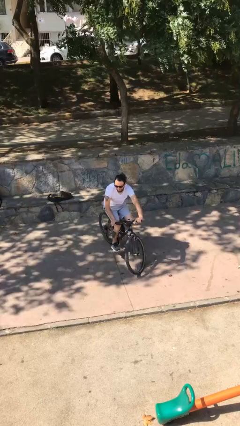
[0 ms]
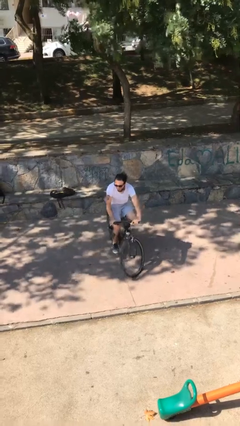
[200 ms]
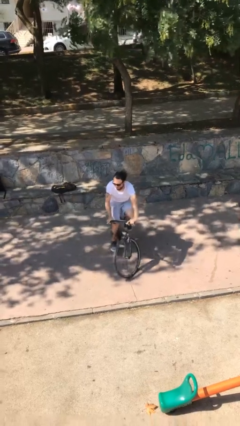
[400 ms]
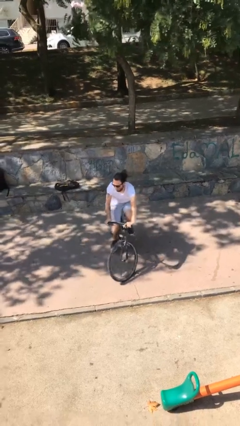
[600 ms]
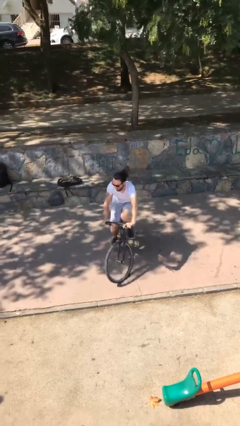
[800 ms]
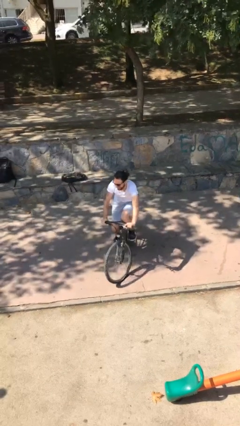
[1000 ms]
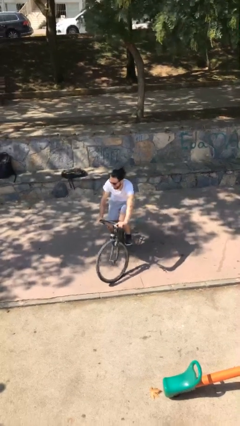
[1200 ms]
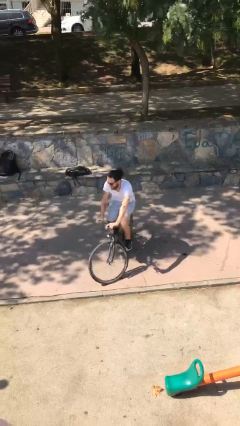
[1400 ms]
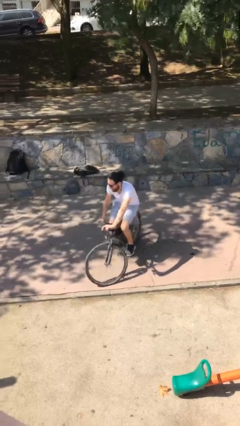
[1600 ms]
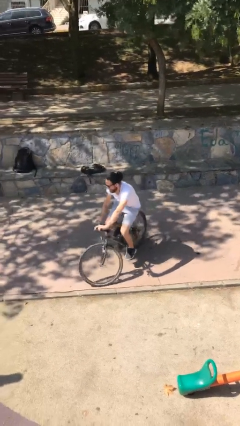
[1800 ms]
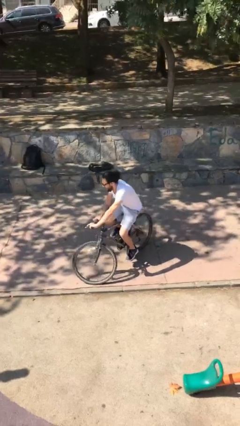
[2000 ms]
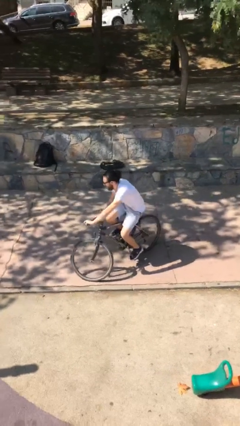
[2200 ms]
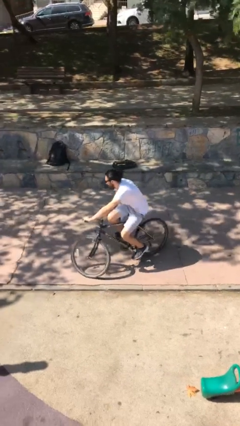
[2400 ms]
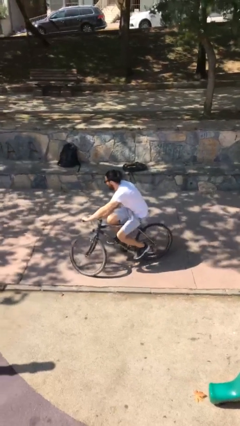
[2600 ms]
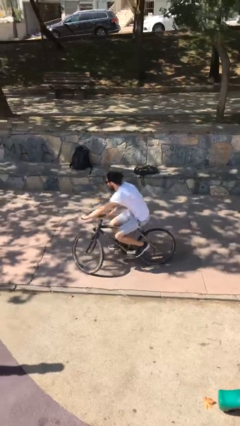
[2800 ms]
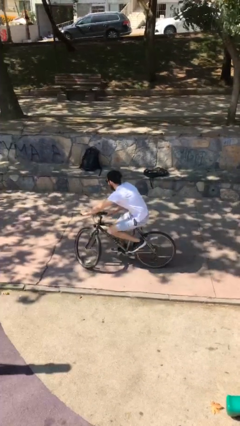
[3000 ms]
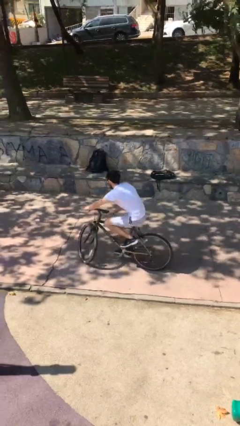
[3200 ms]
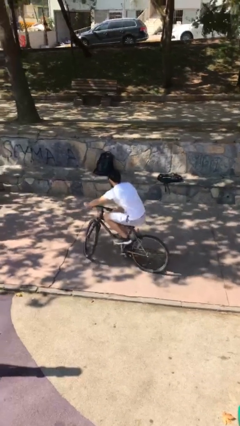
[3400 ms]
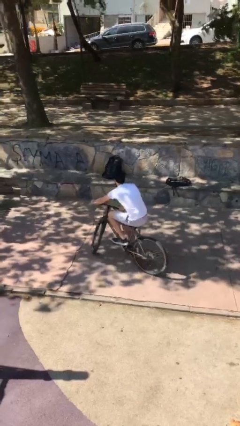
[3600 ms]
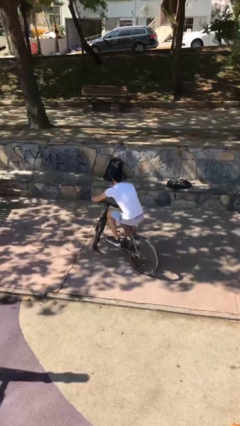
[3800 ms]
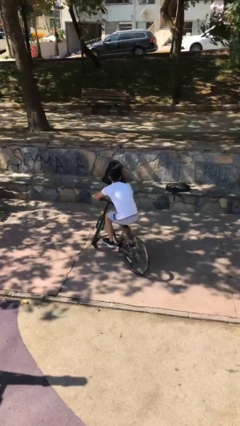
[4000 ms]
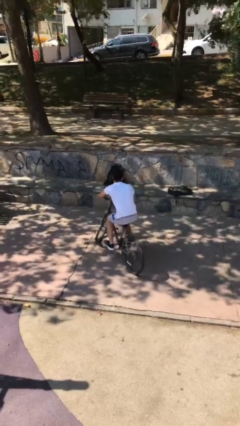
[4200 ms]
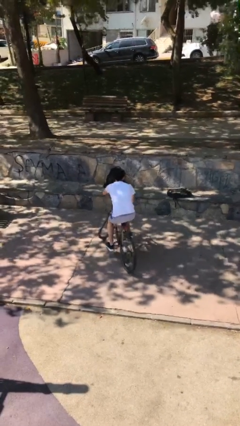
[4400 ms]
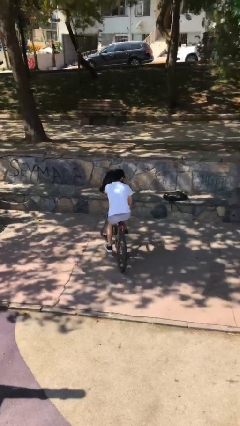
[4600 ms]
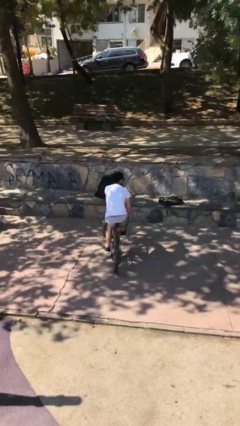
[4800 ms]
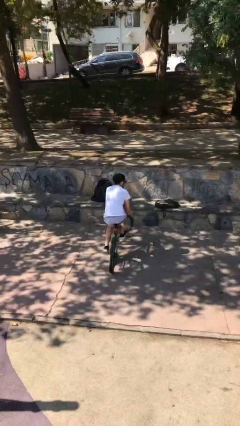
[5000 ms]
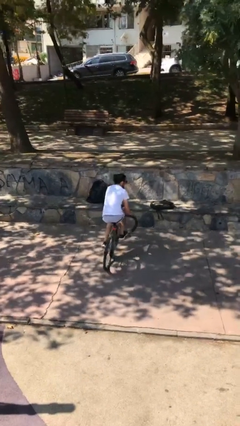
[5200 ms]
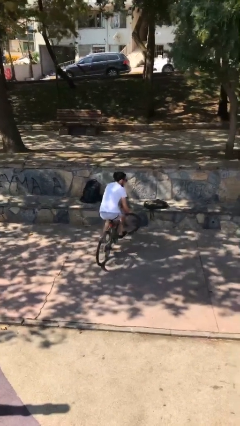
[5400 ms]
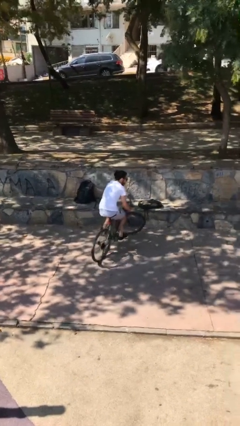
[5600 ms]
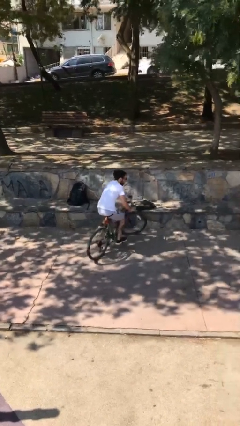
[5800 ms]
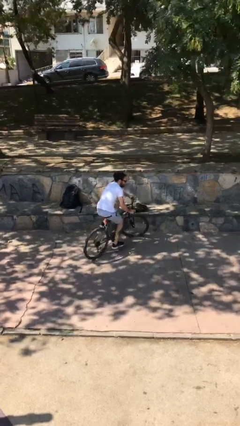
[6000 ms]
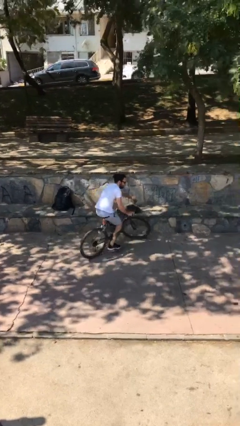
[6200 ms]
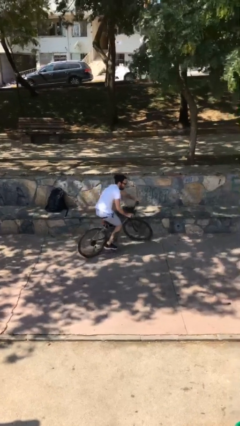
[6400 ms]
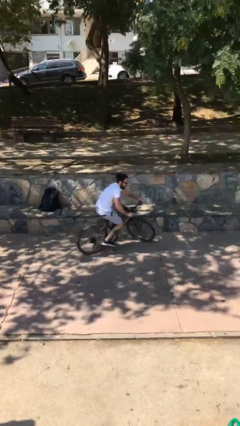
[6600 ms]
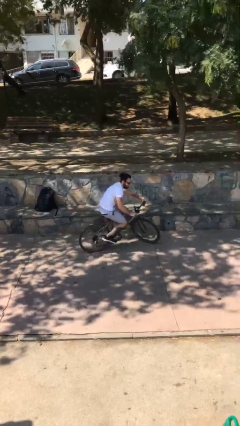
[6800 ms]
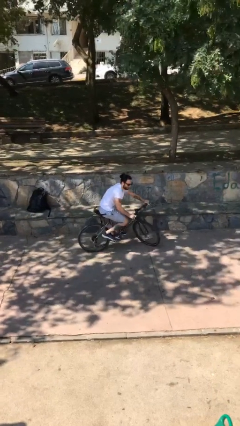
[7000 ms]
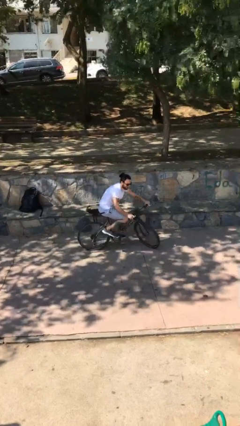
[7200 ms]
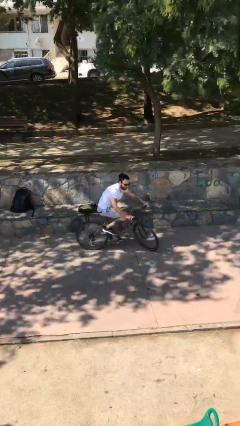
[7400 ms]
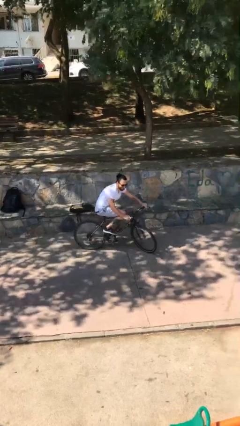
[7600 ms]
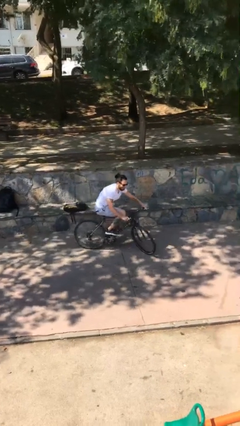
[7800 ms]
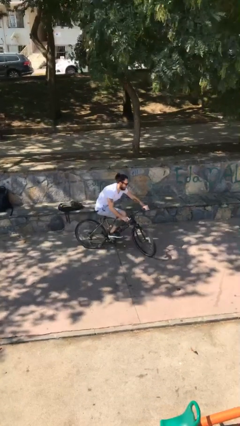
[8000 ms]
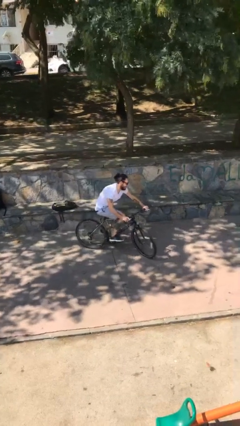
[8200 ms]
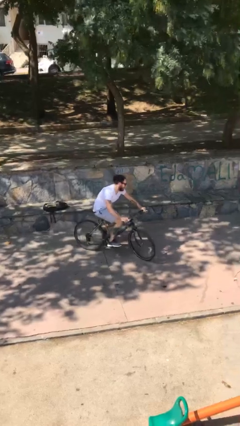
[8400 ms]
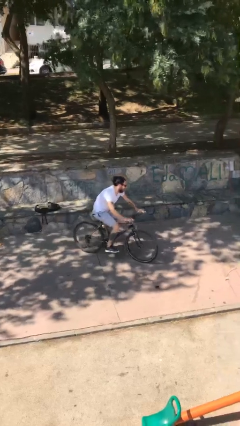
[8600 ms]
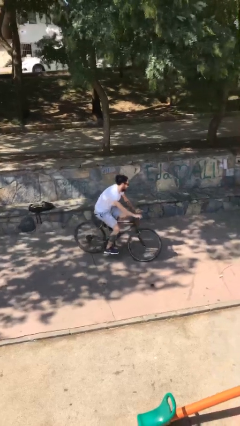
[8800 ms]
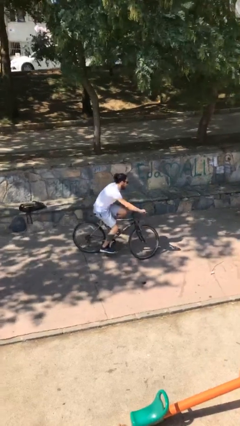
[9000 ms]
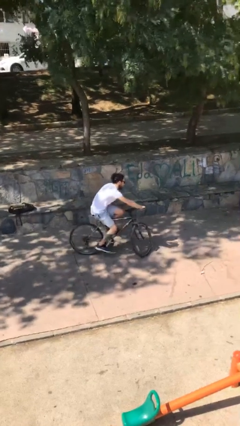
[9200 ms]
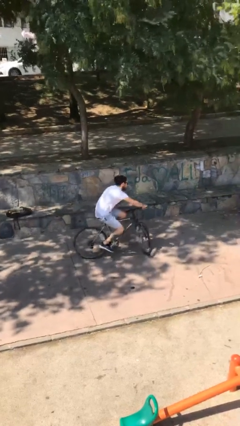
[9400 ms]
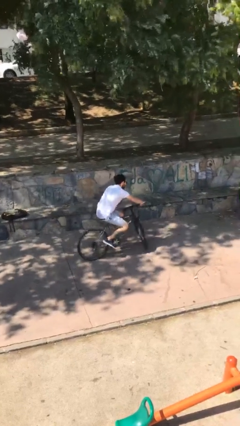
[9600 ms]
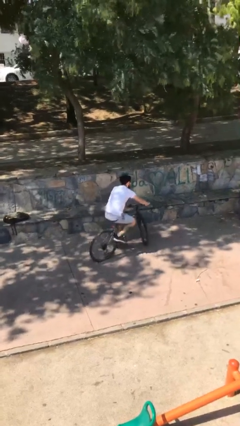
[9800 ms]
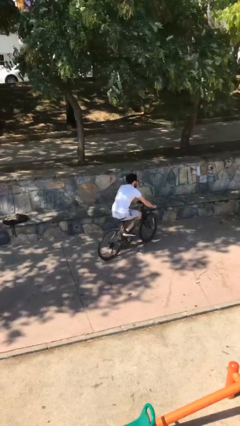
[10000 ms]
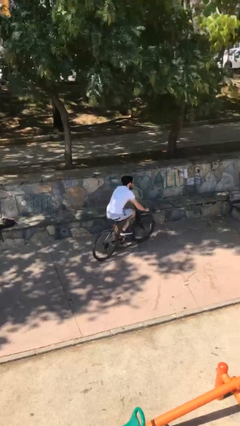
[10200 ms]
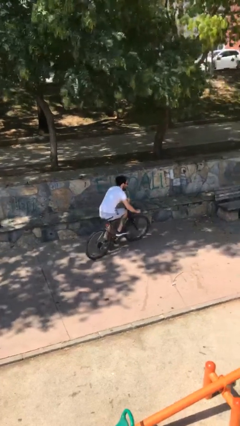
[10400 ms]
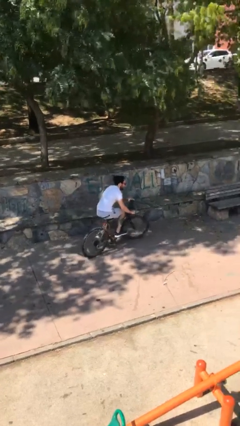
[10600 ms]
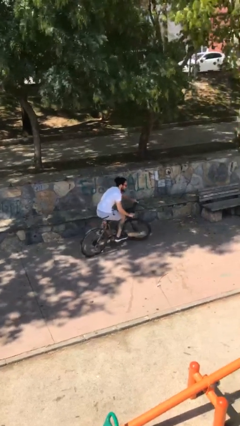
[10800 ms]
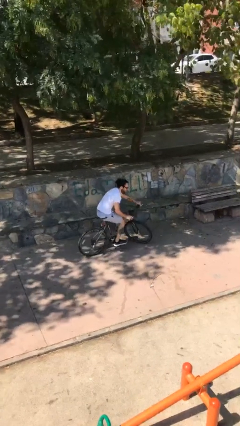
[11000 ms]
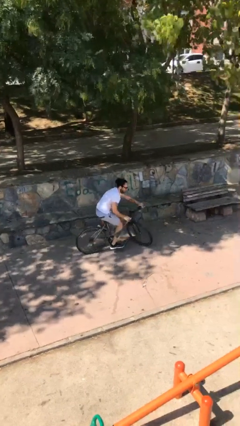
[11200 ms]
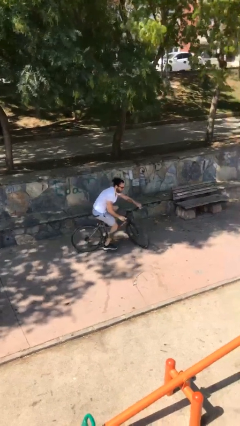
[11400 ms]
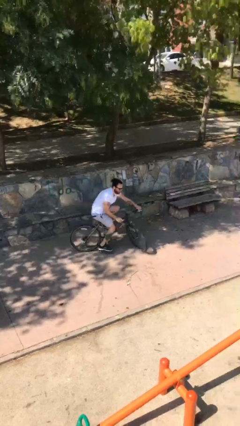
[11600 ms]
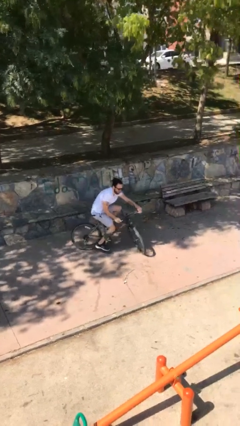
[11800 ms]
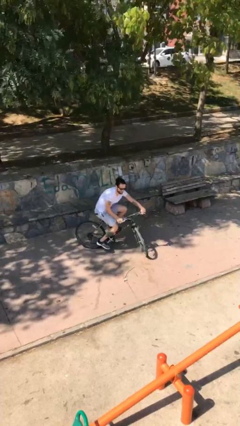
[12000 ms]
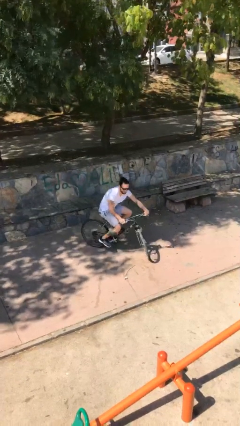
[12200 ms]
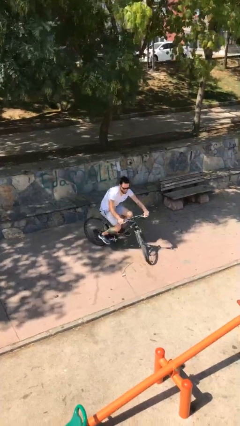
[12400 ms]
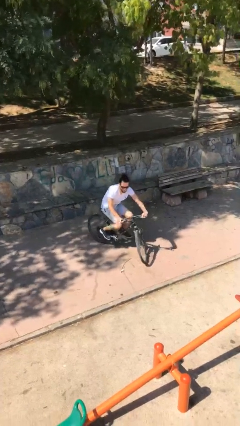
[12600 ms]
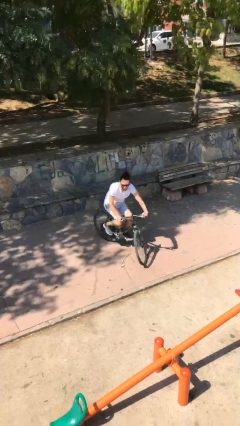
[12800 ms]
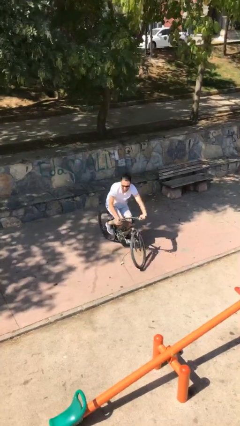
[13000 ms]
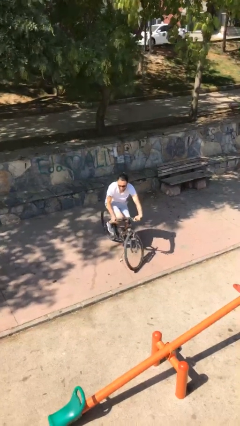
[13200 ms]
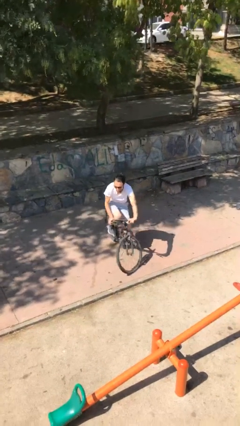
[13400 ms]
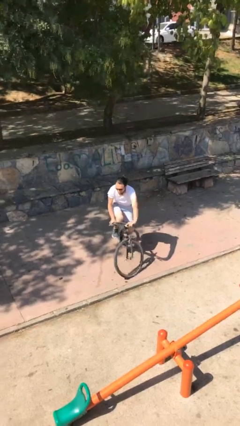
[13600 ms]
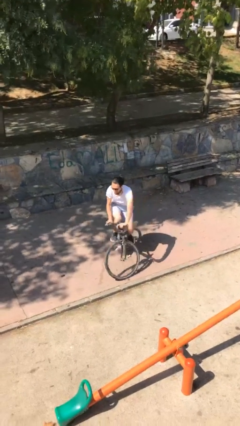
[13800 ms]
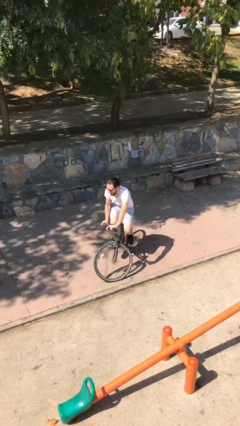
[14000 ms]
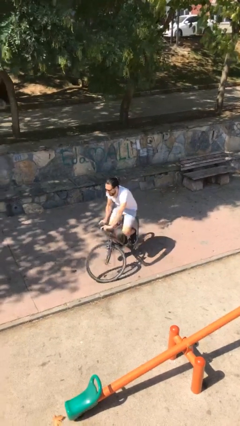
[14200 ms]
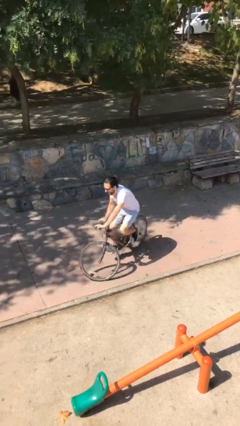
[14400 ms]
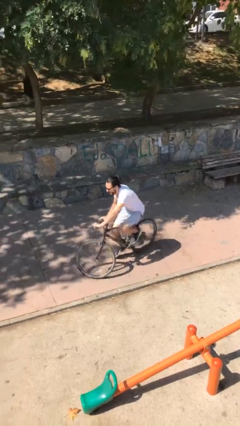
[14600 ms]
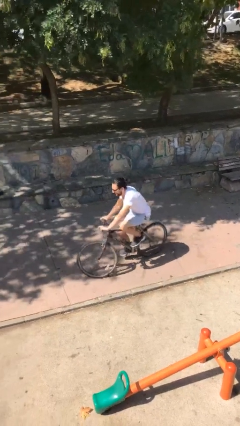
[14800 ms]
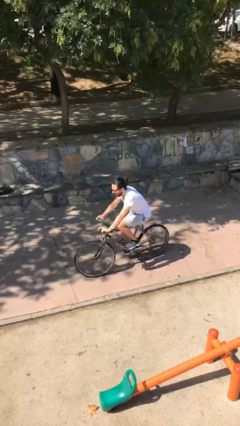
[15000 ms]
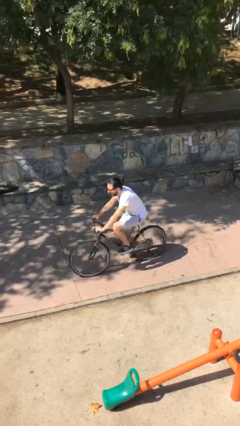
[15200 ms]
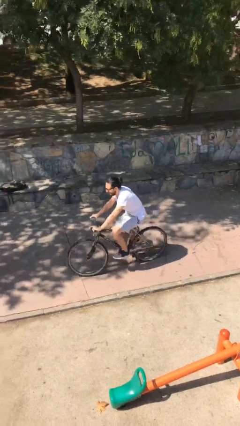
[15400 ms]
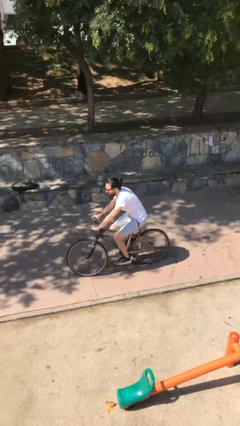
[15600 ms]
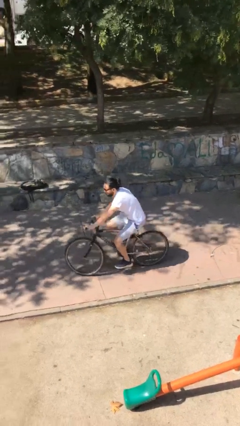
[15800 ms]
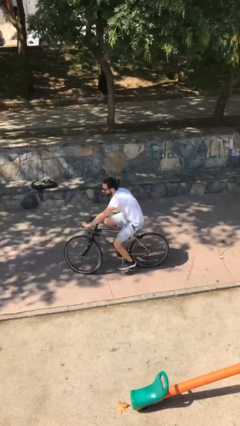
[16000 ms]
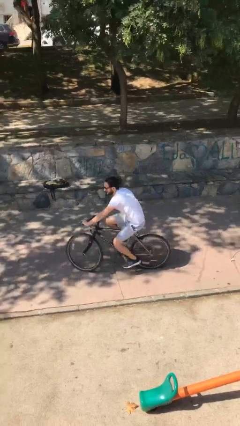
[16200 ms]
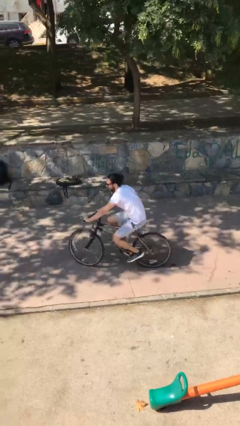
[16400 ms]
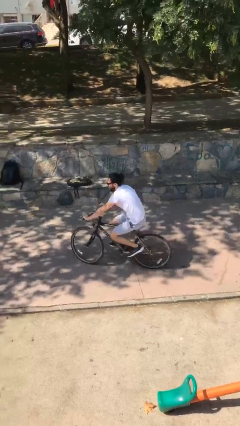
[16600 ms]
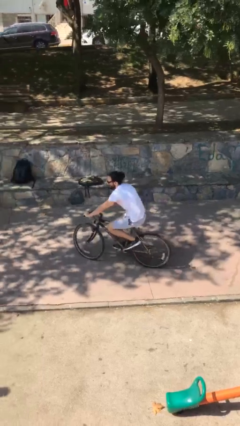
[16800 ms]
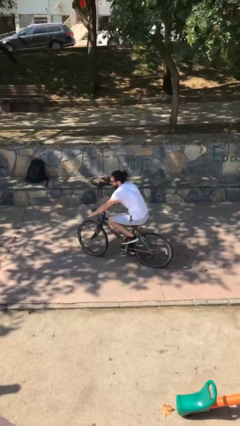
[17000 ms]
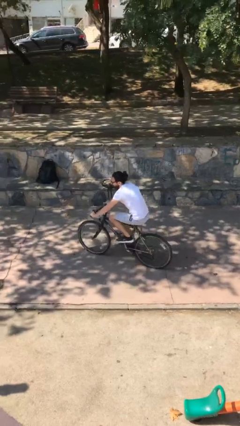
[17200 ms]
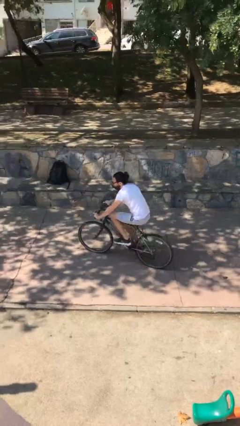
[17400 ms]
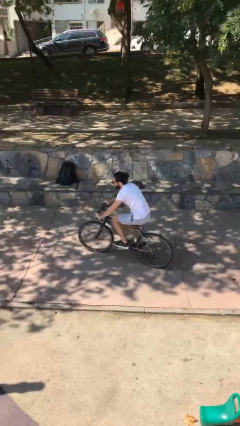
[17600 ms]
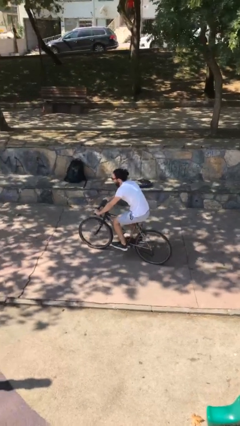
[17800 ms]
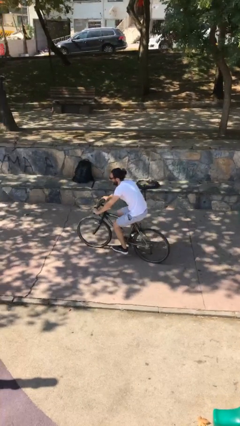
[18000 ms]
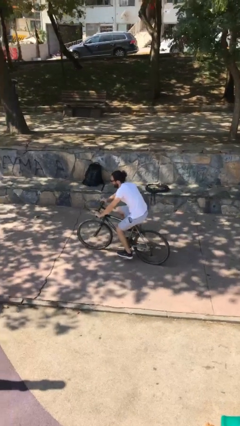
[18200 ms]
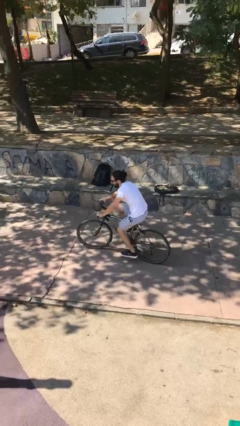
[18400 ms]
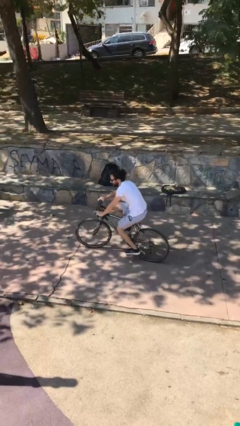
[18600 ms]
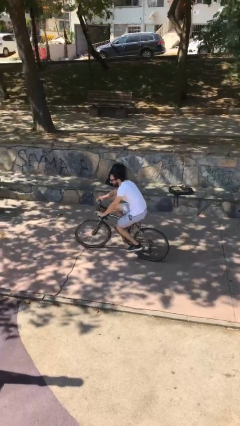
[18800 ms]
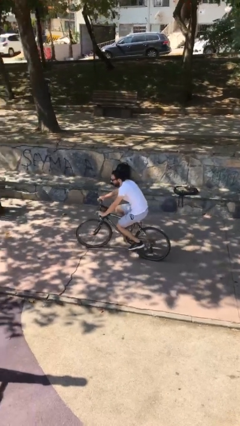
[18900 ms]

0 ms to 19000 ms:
person rides bicycle
